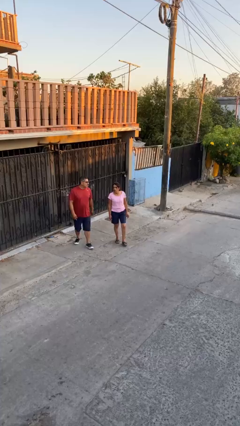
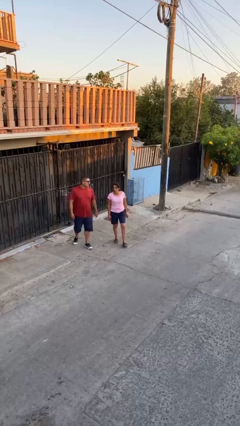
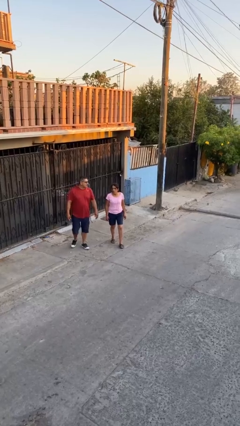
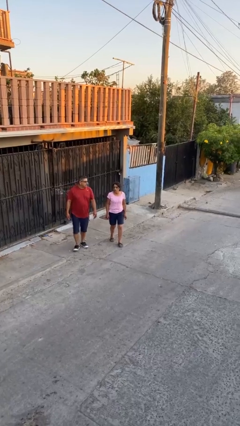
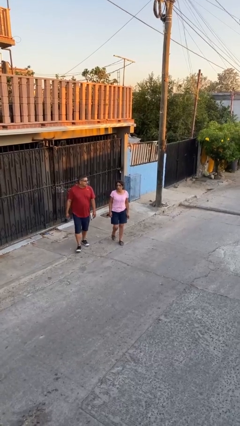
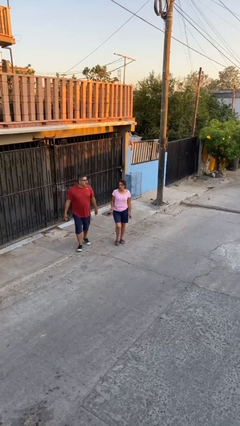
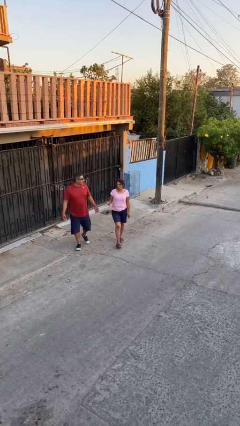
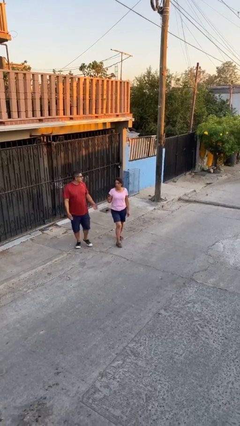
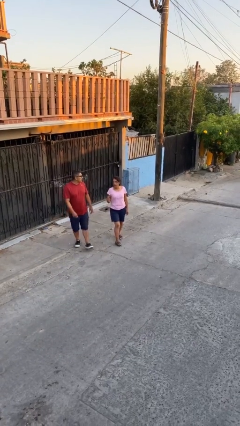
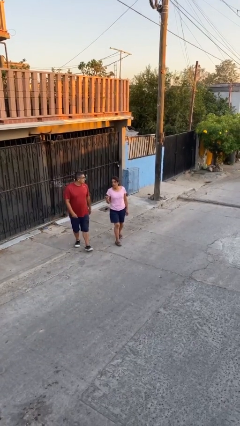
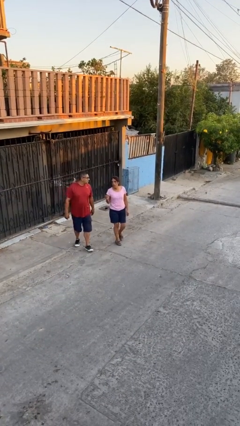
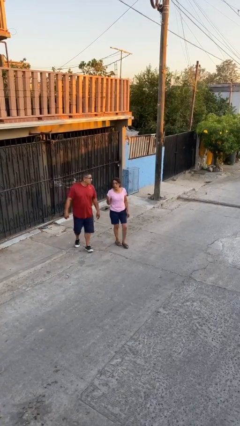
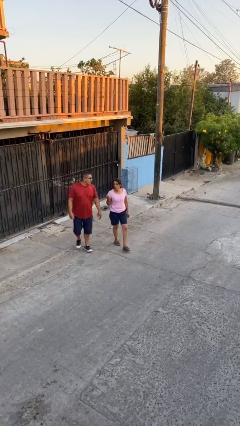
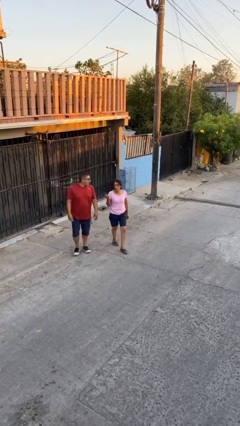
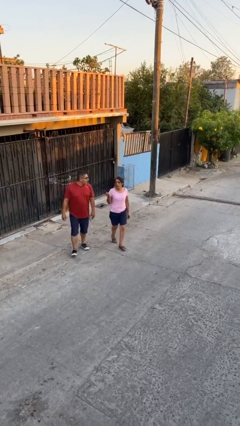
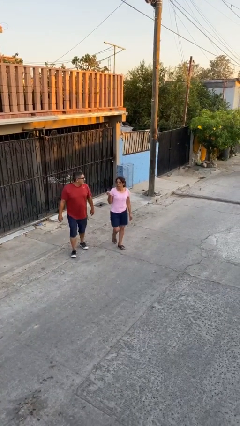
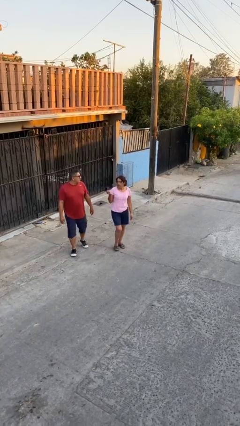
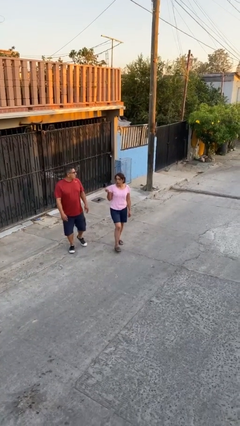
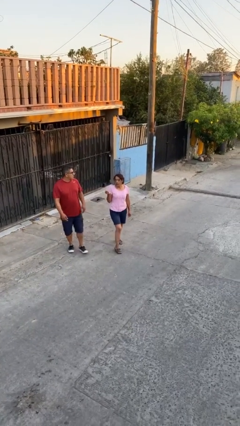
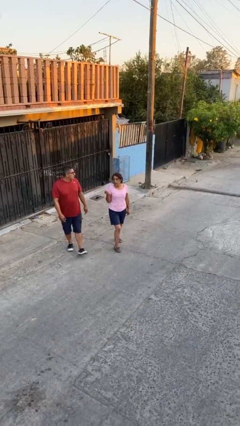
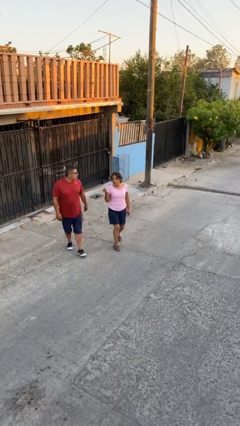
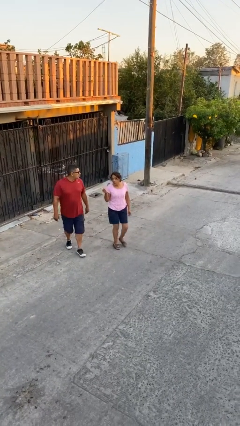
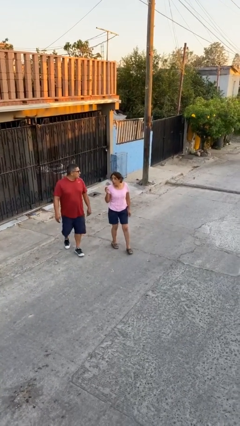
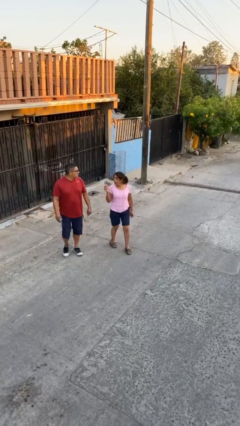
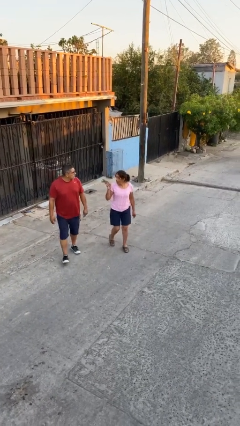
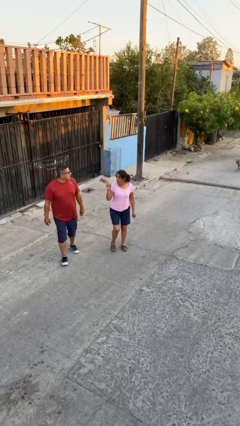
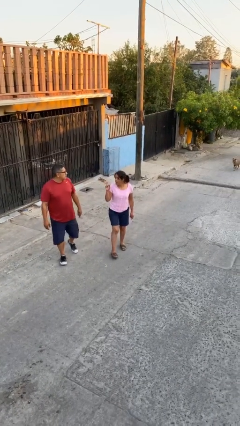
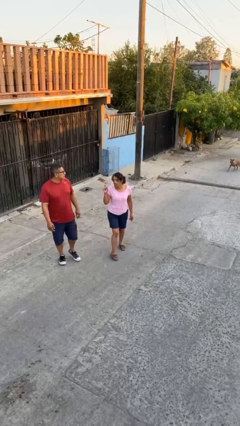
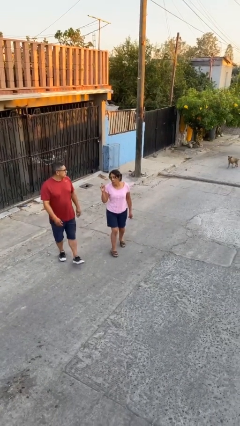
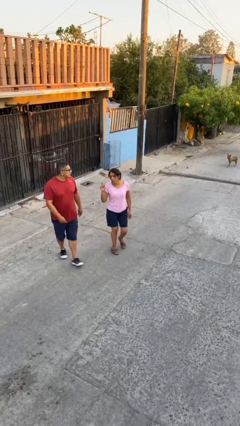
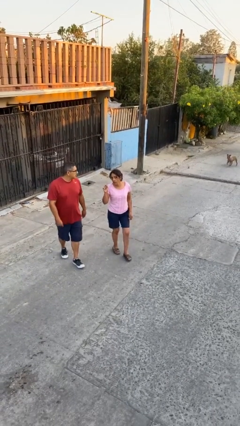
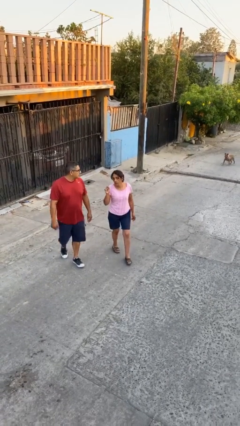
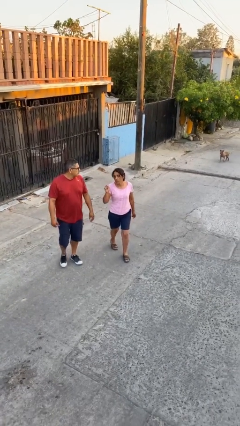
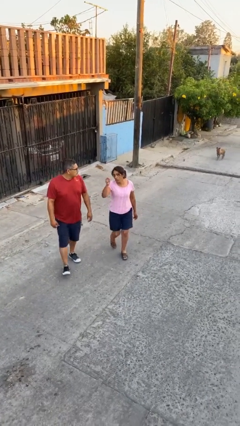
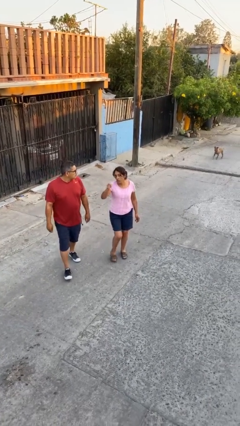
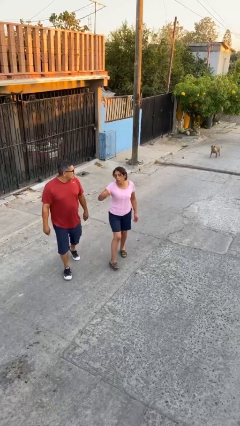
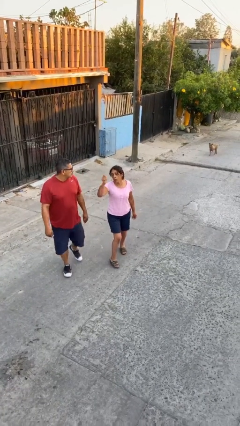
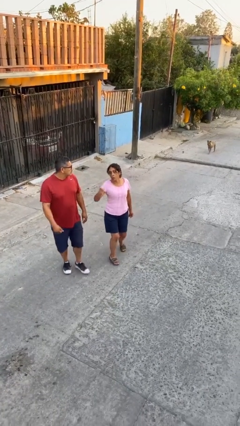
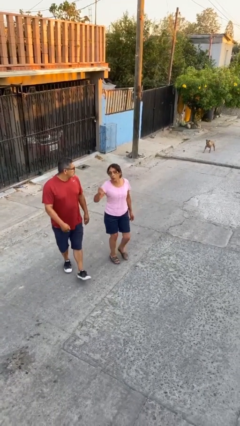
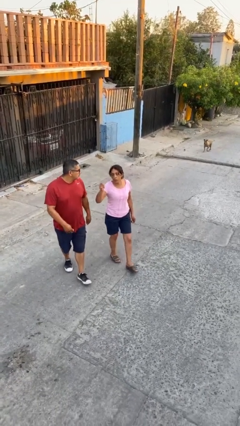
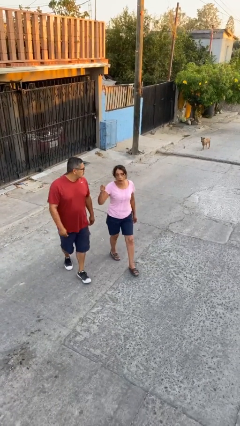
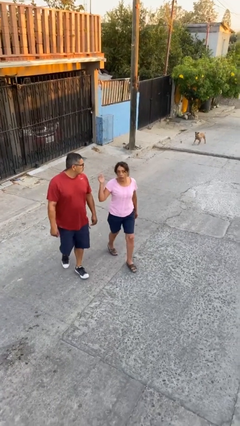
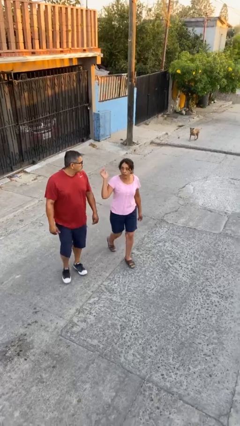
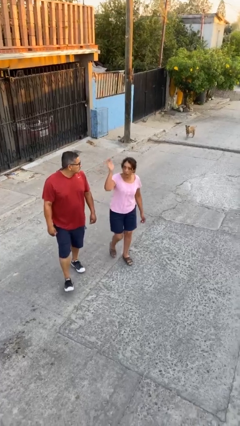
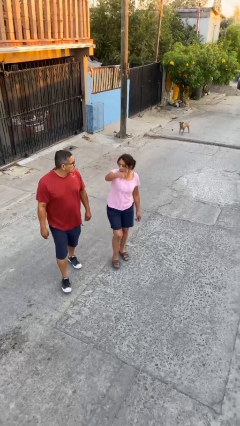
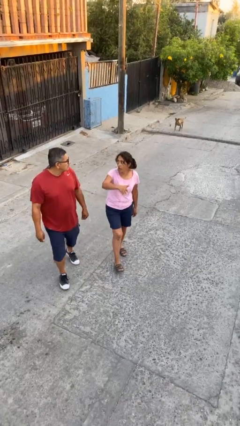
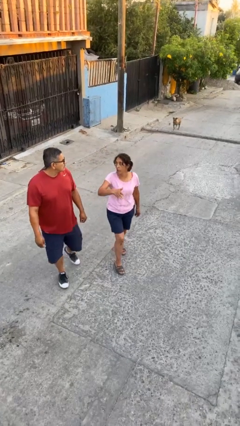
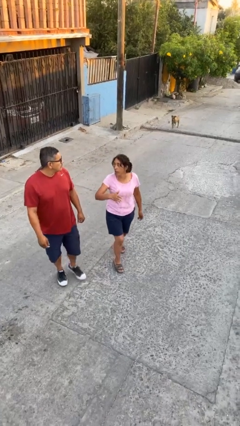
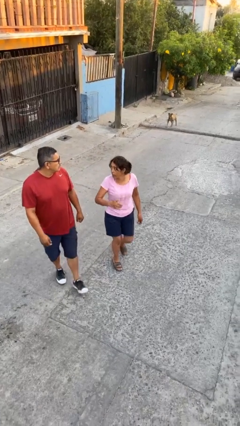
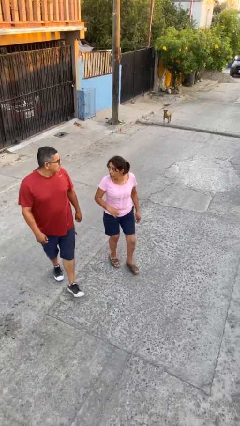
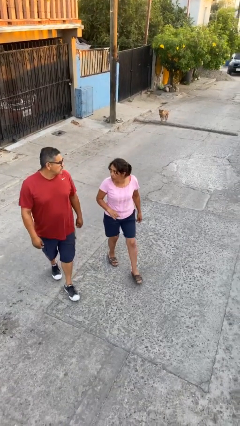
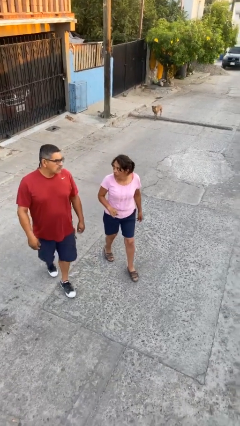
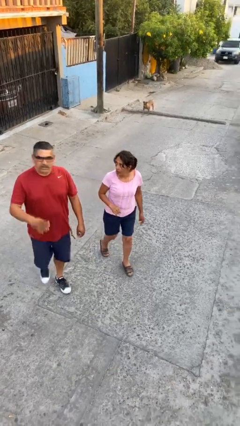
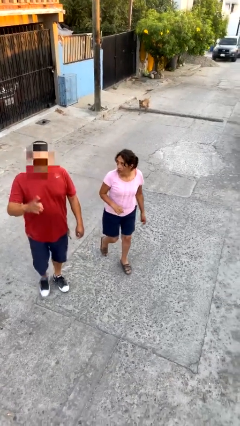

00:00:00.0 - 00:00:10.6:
person talks to person

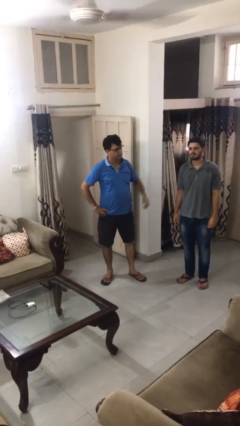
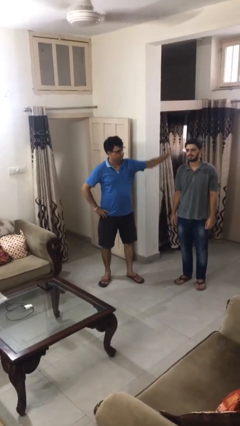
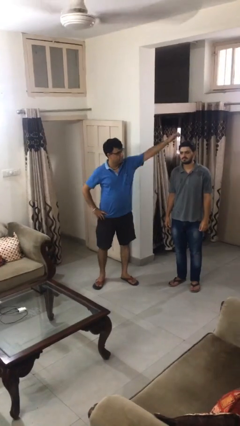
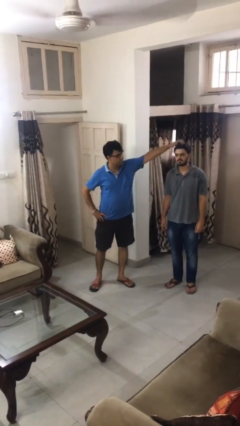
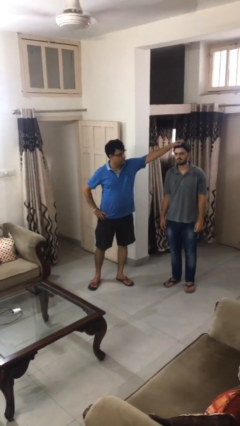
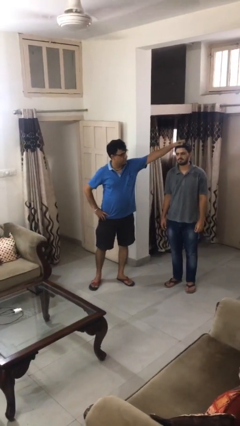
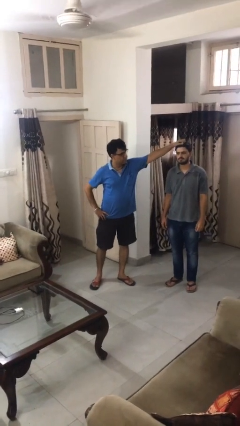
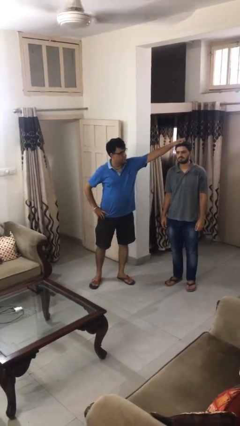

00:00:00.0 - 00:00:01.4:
person grabs person by hair

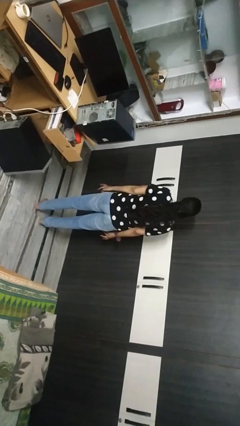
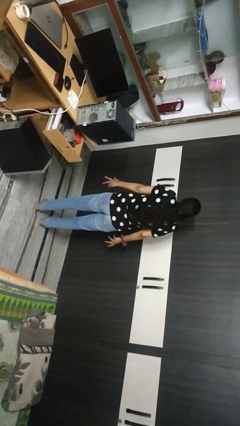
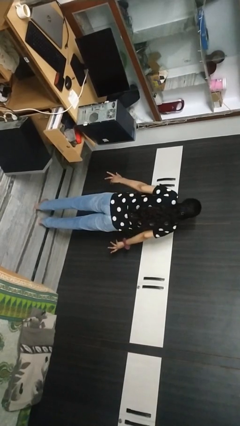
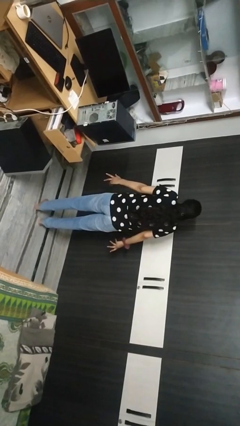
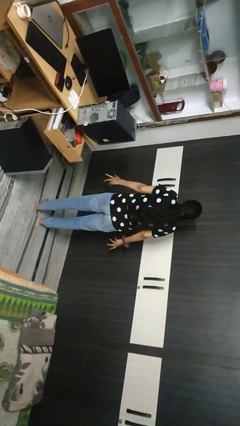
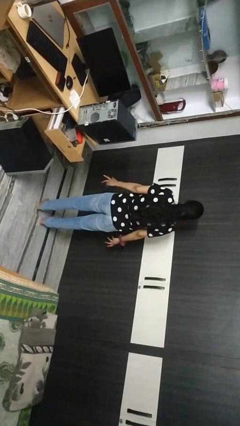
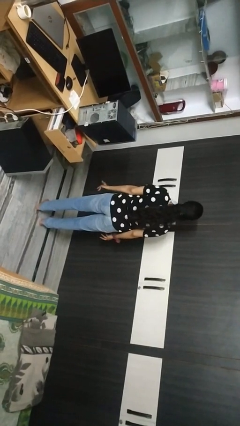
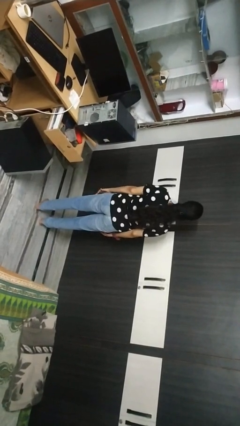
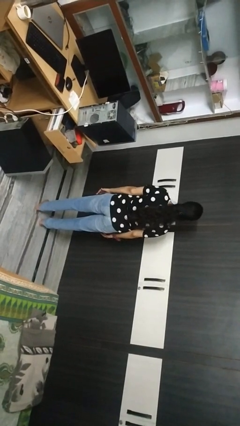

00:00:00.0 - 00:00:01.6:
person shrugs

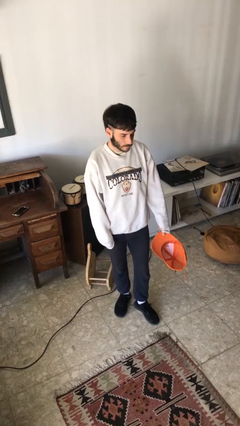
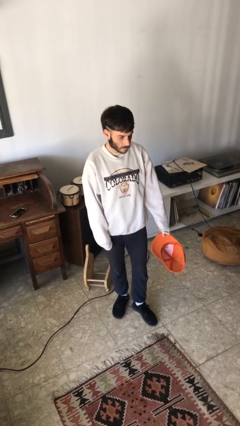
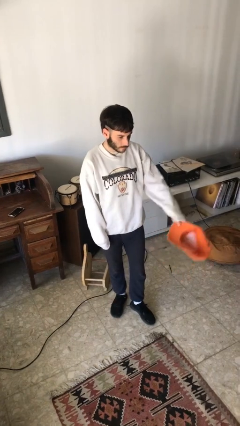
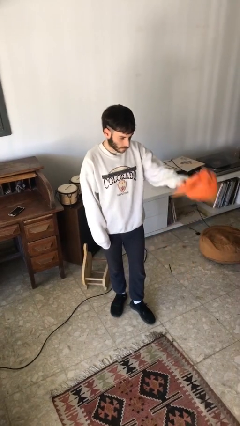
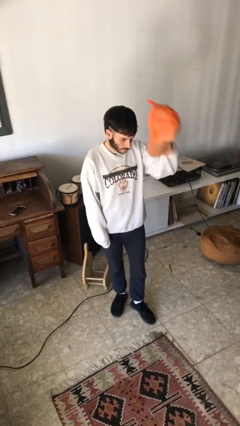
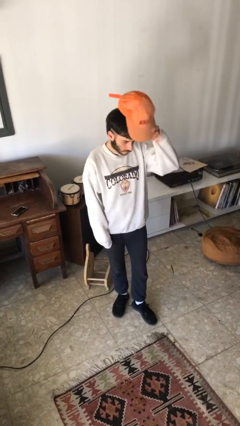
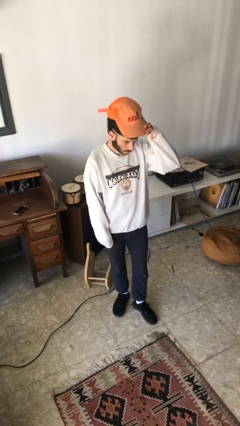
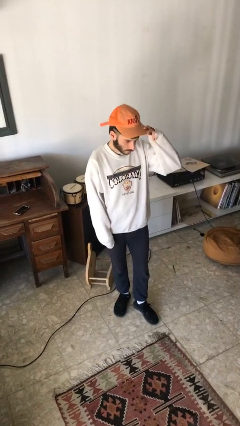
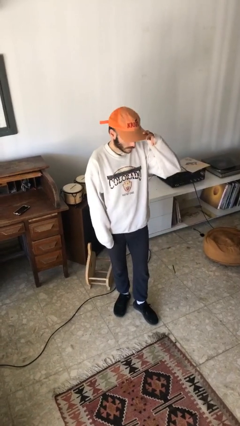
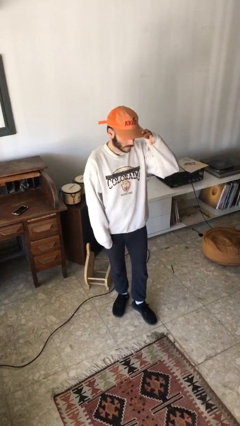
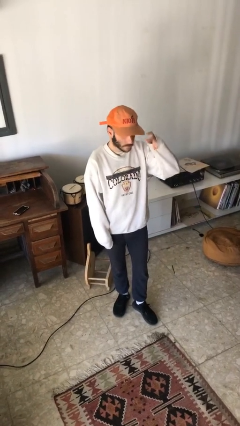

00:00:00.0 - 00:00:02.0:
person puts on hat

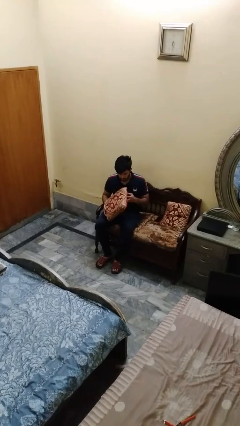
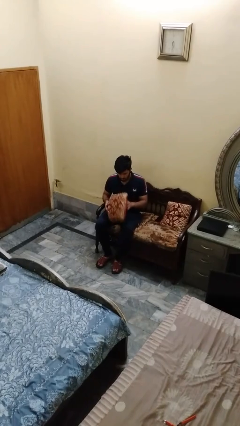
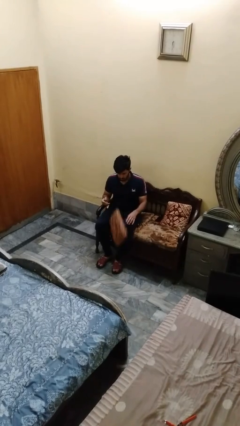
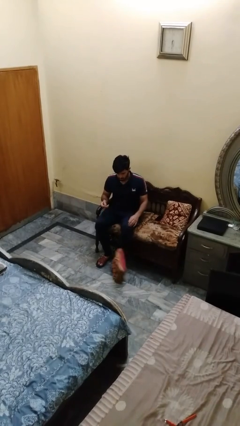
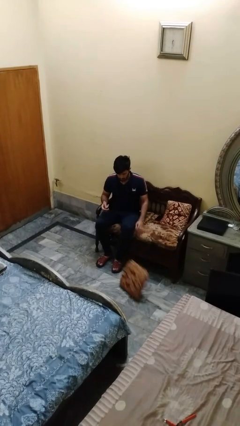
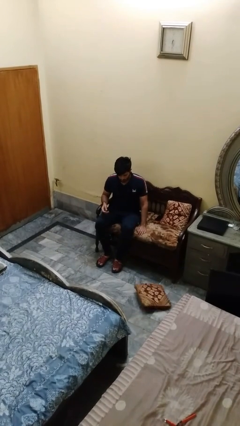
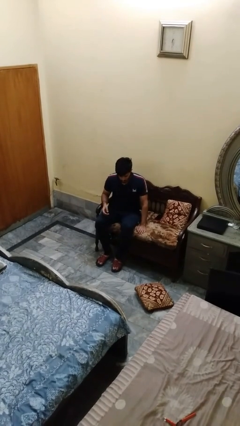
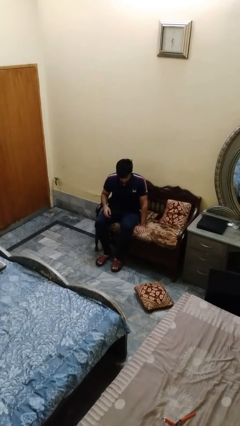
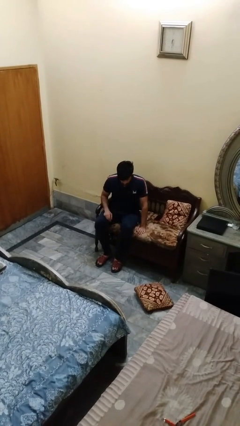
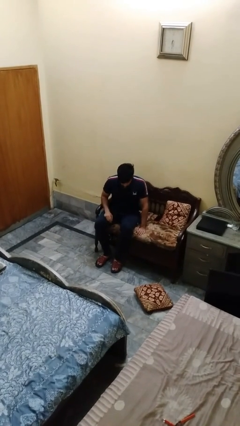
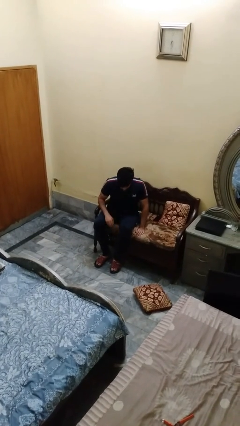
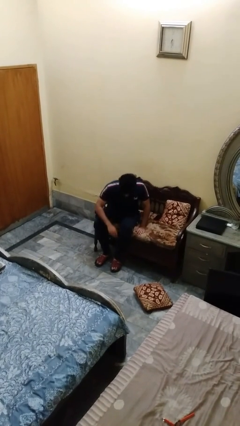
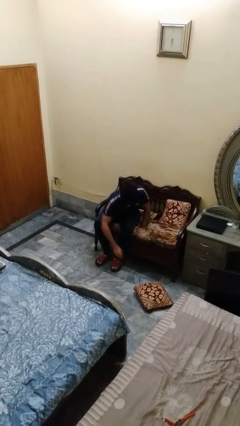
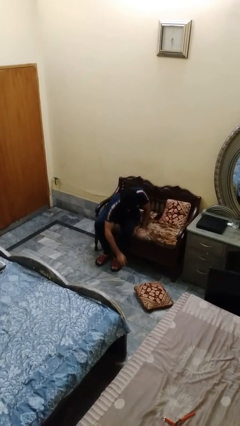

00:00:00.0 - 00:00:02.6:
person drops object
